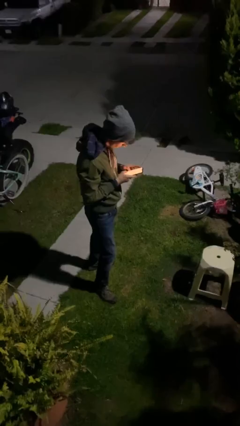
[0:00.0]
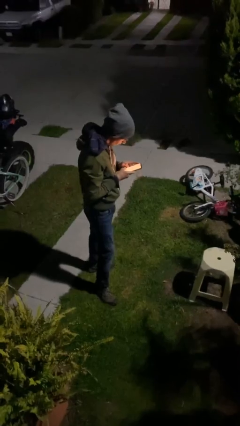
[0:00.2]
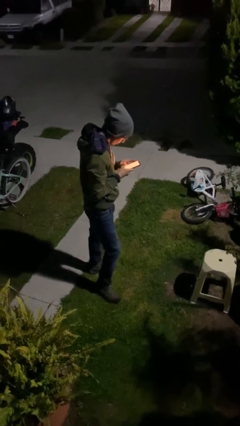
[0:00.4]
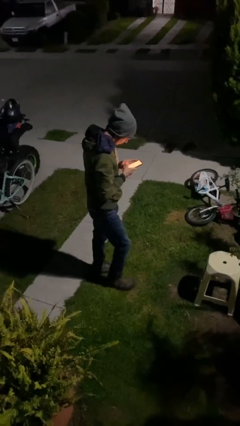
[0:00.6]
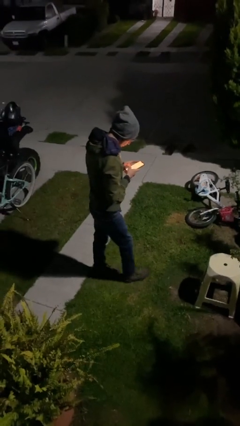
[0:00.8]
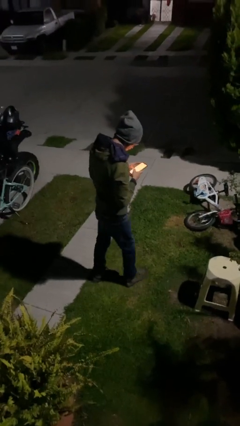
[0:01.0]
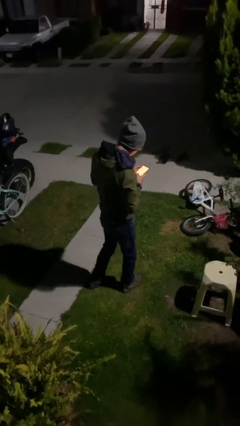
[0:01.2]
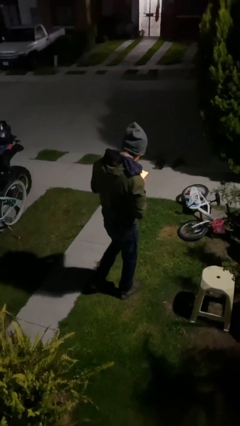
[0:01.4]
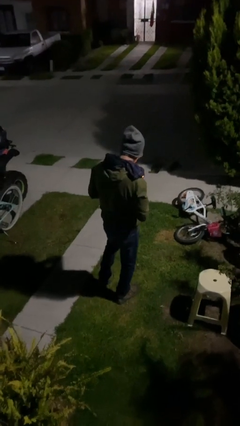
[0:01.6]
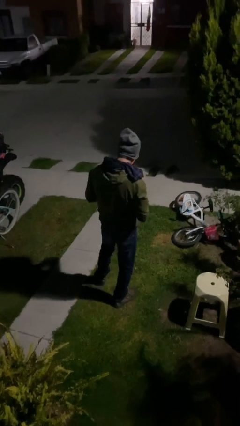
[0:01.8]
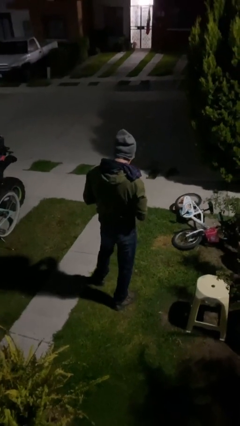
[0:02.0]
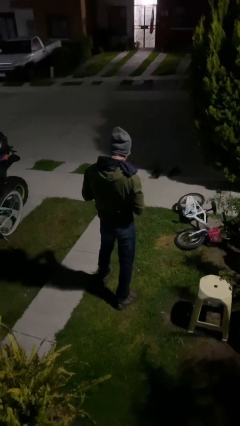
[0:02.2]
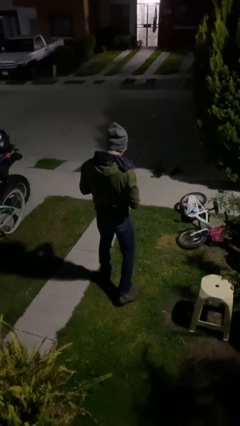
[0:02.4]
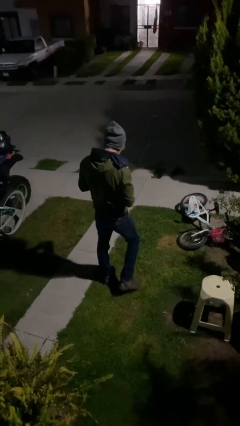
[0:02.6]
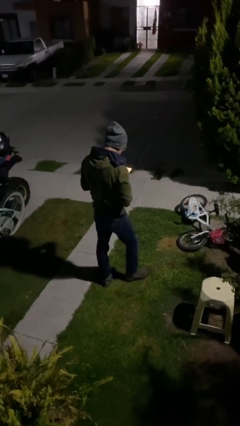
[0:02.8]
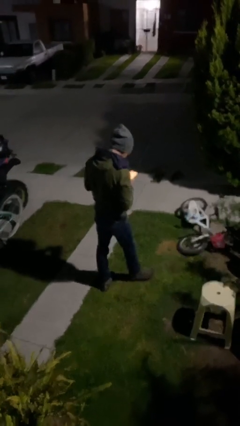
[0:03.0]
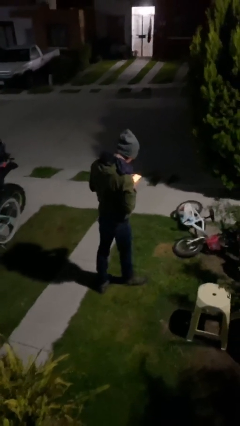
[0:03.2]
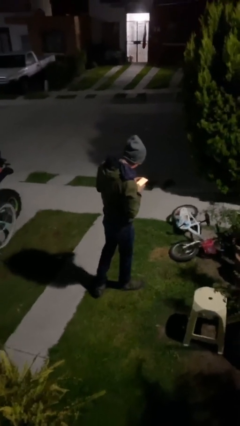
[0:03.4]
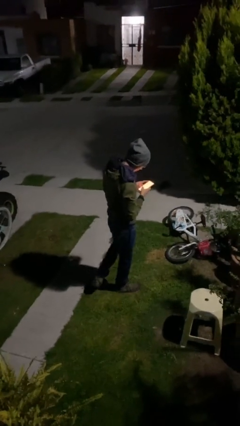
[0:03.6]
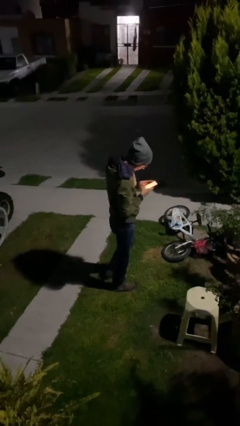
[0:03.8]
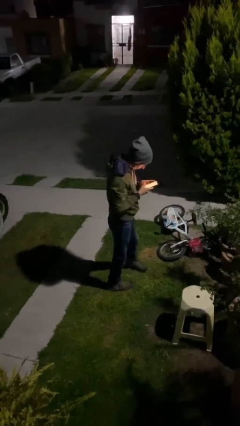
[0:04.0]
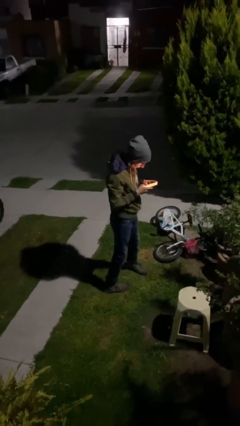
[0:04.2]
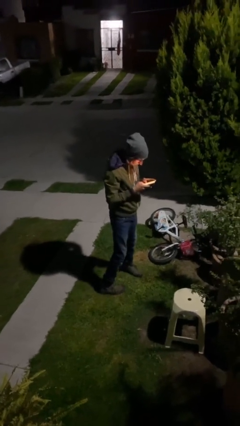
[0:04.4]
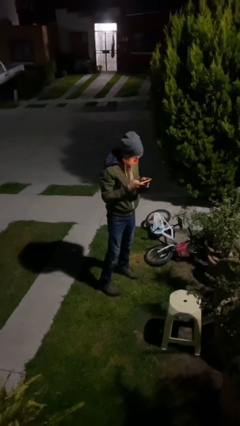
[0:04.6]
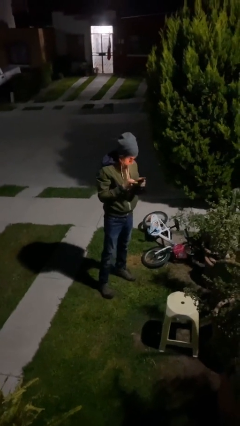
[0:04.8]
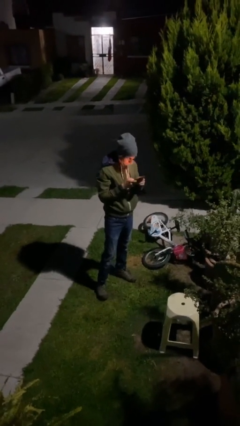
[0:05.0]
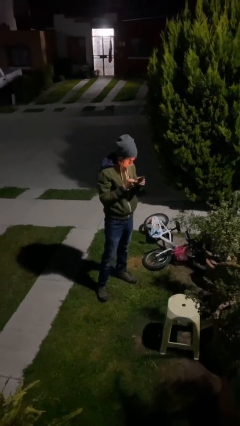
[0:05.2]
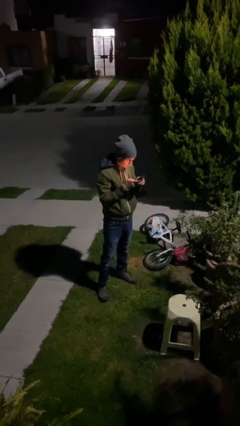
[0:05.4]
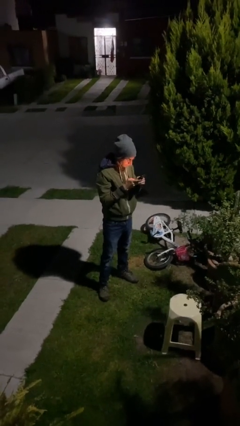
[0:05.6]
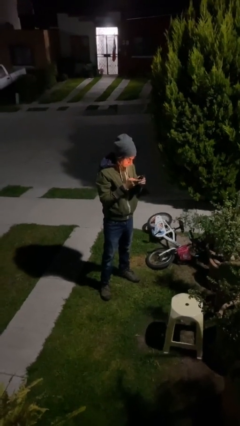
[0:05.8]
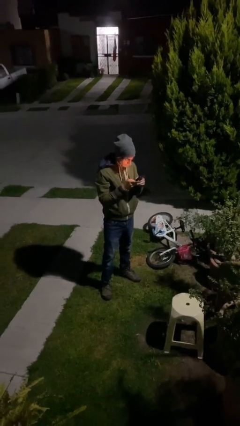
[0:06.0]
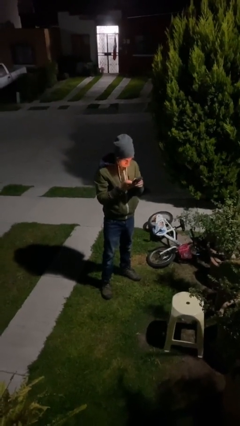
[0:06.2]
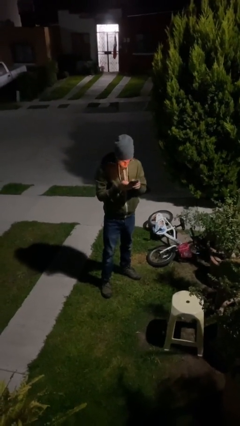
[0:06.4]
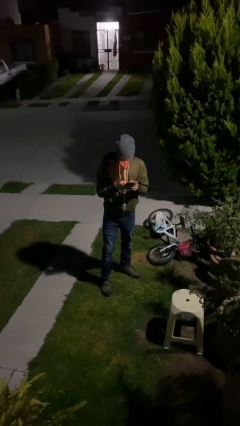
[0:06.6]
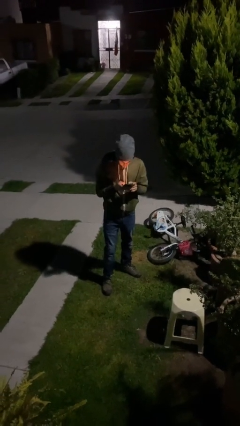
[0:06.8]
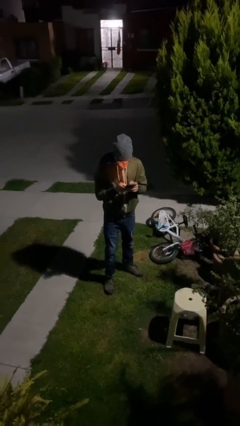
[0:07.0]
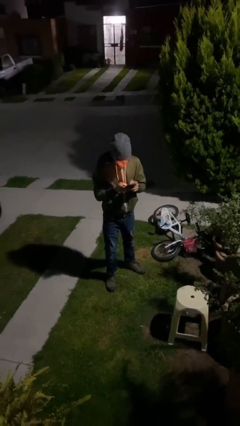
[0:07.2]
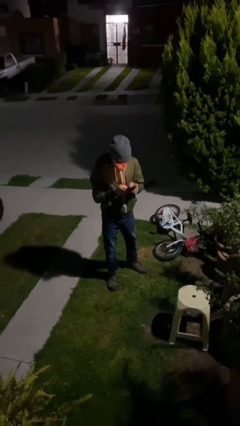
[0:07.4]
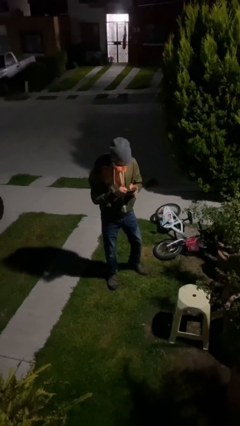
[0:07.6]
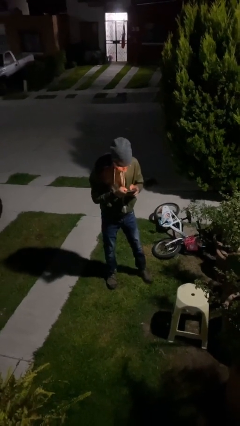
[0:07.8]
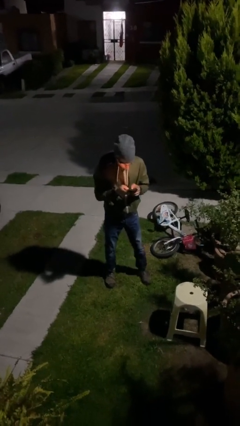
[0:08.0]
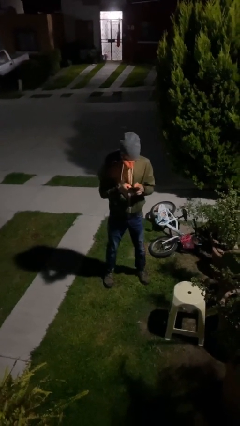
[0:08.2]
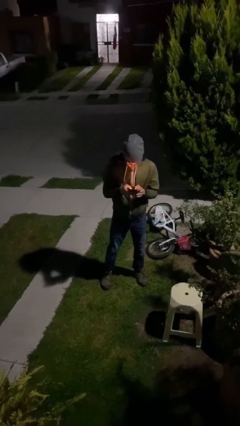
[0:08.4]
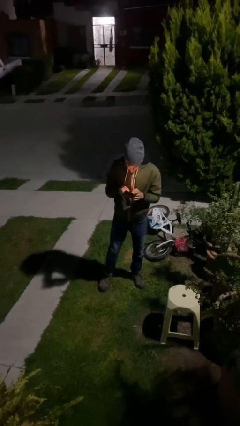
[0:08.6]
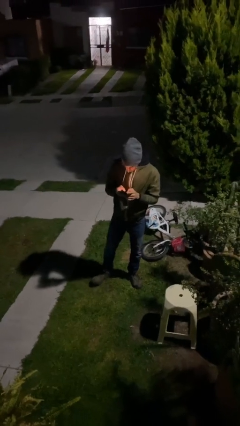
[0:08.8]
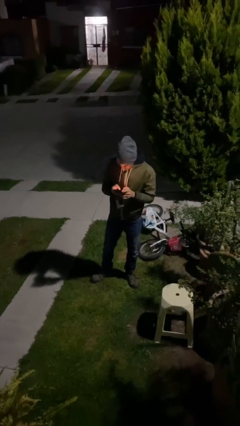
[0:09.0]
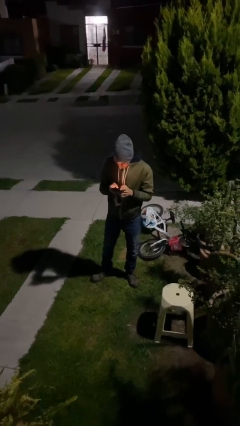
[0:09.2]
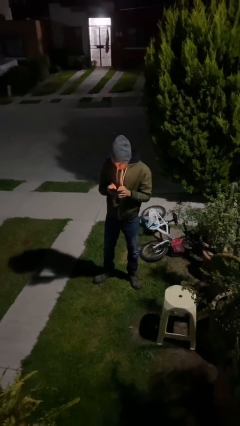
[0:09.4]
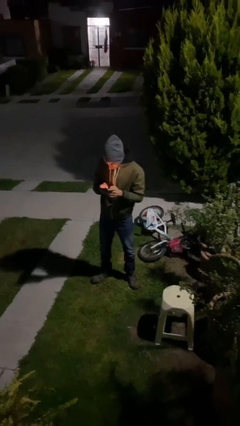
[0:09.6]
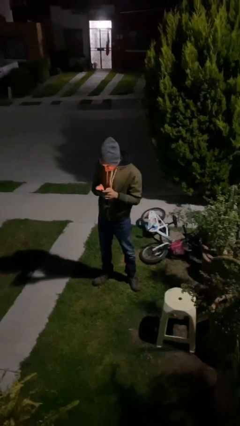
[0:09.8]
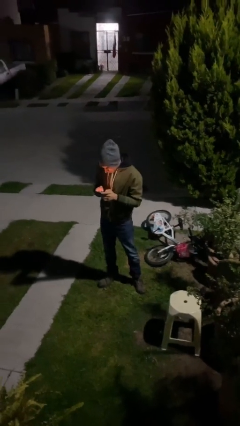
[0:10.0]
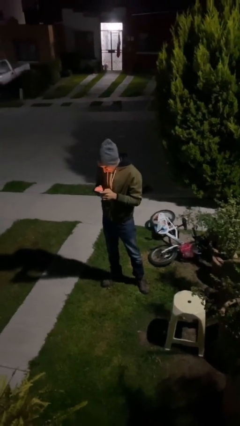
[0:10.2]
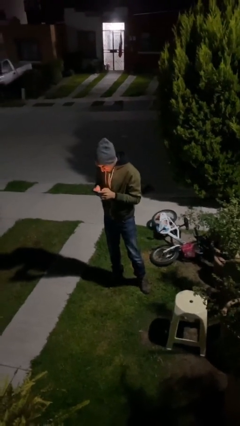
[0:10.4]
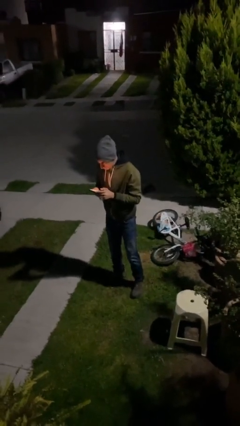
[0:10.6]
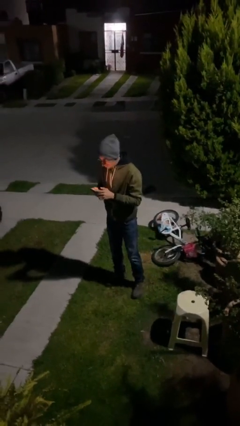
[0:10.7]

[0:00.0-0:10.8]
person texts on phone

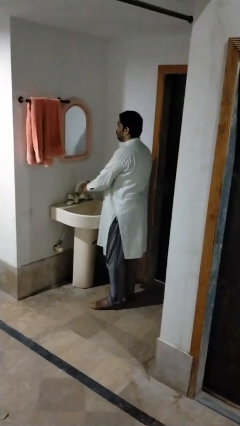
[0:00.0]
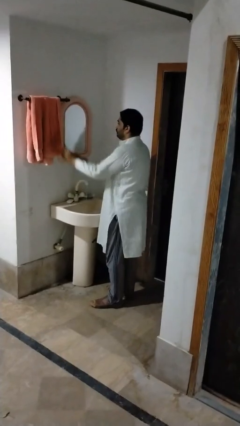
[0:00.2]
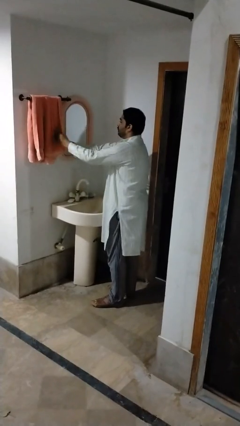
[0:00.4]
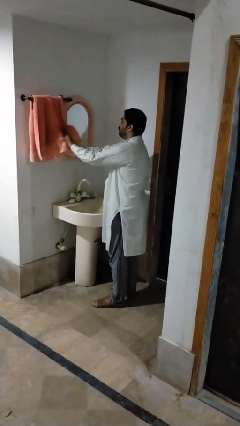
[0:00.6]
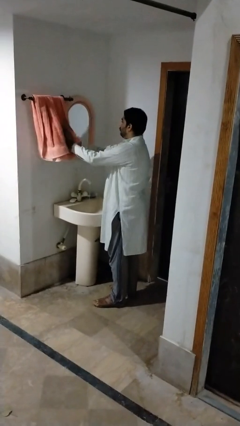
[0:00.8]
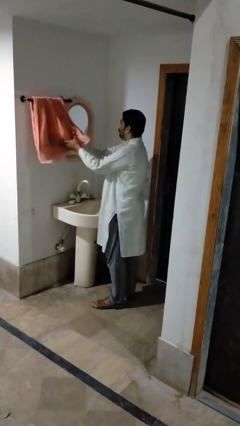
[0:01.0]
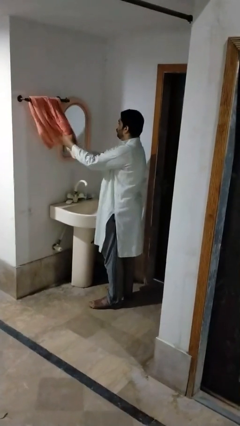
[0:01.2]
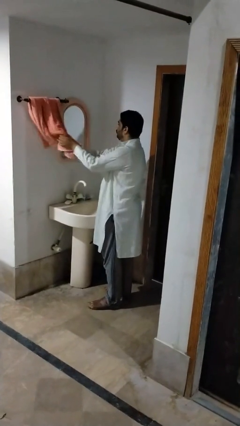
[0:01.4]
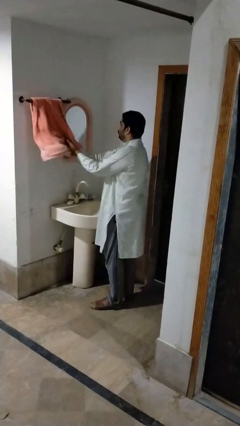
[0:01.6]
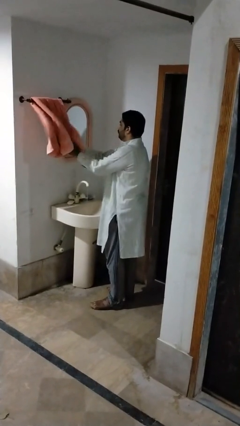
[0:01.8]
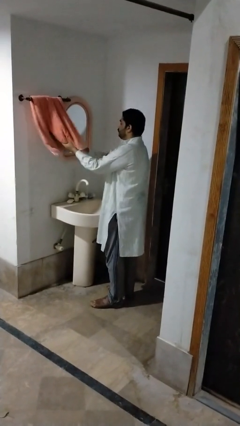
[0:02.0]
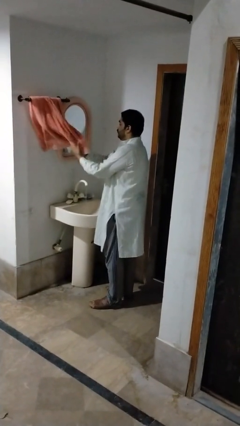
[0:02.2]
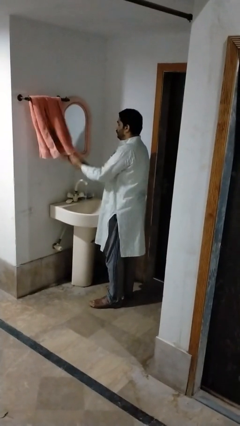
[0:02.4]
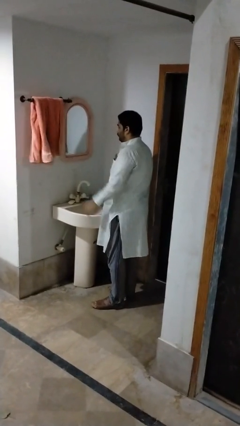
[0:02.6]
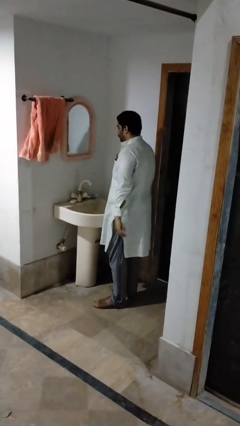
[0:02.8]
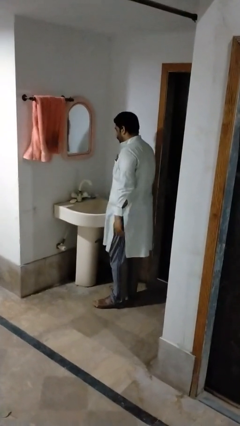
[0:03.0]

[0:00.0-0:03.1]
person dries hands with towel

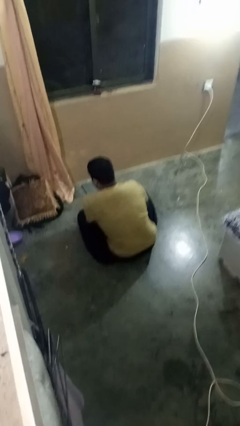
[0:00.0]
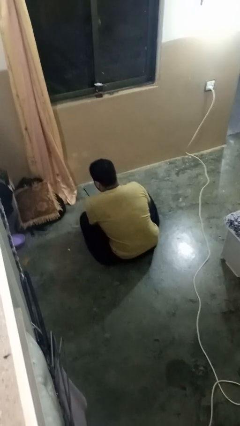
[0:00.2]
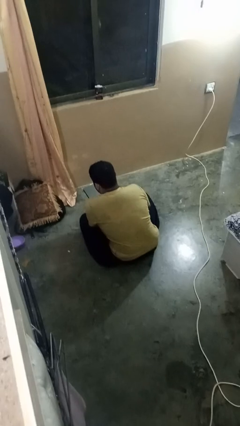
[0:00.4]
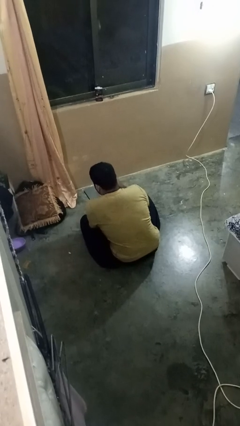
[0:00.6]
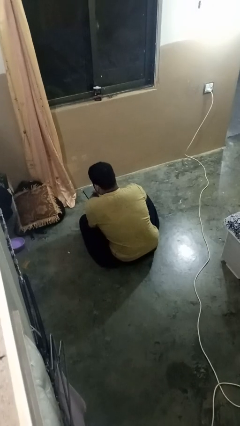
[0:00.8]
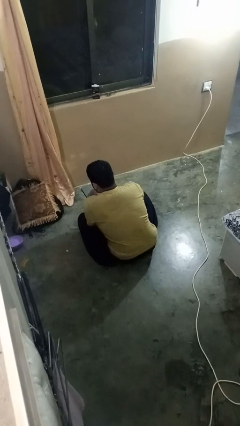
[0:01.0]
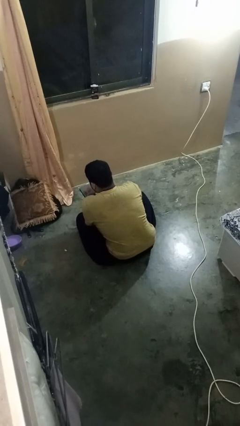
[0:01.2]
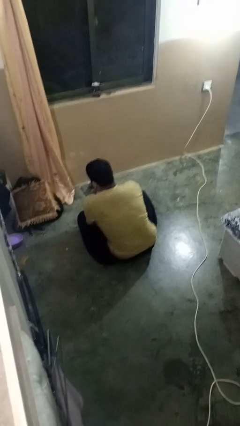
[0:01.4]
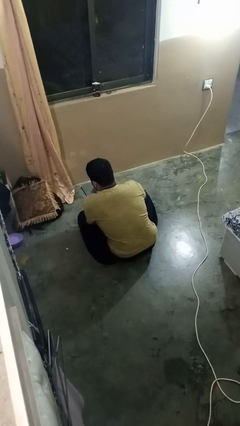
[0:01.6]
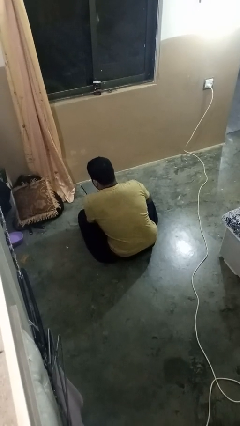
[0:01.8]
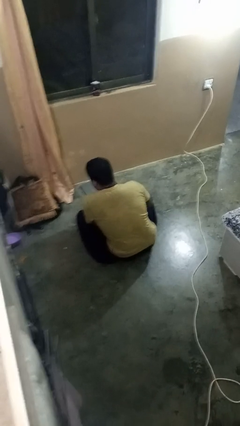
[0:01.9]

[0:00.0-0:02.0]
person interacts with tablet

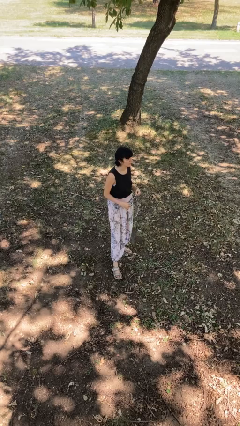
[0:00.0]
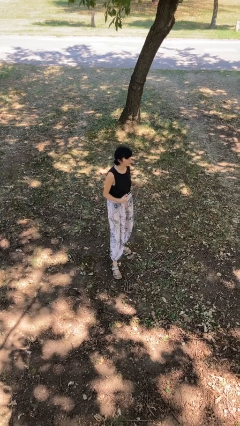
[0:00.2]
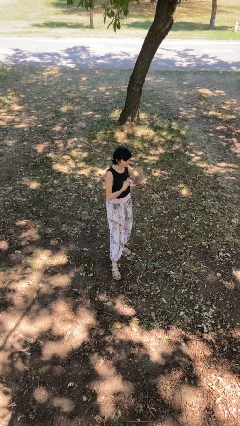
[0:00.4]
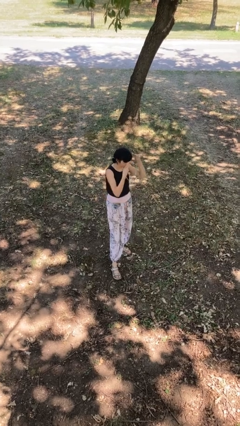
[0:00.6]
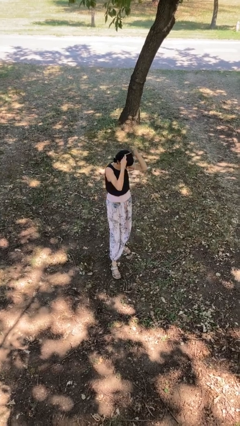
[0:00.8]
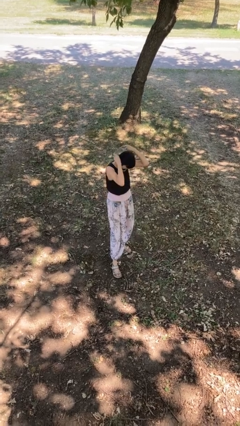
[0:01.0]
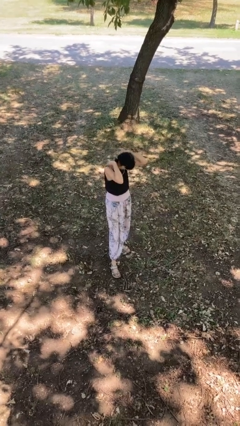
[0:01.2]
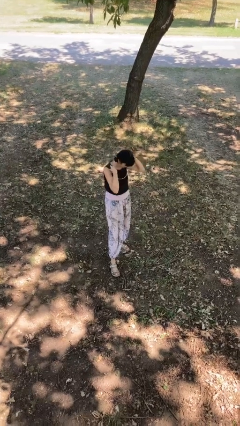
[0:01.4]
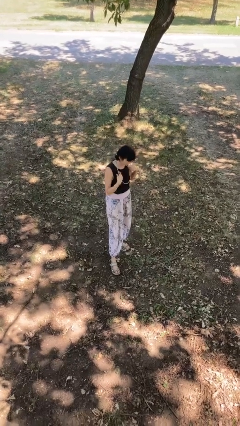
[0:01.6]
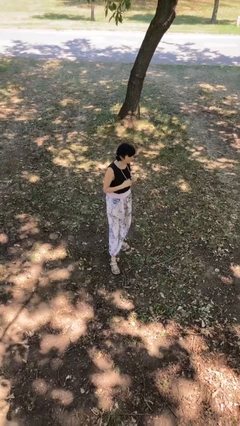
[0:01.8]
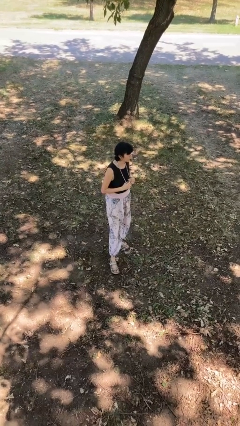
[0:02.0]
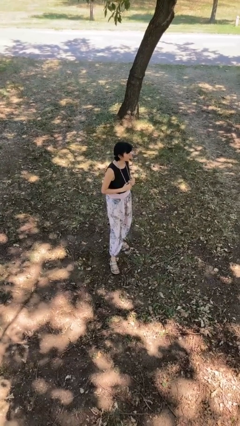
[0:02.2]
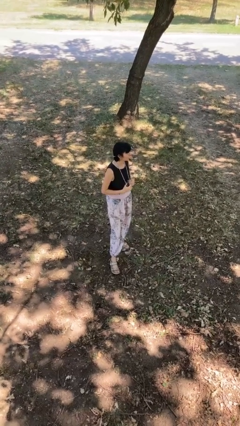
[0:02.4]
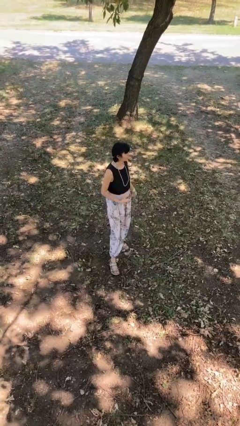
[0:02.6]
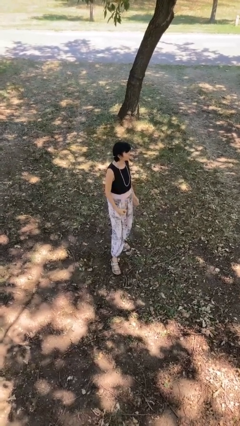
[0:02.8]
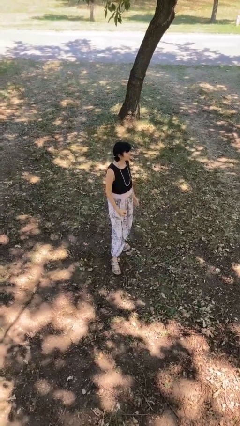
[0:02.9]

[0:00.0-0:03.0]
person puts on necklace
